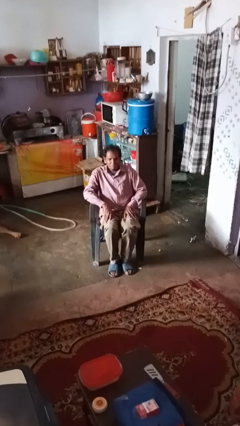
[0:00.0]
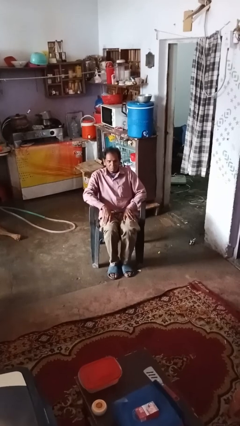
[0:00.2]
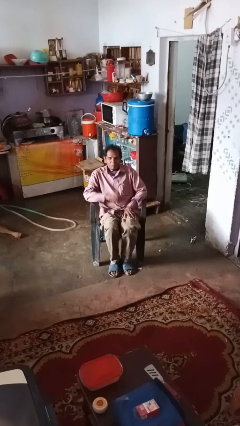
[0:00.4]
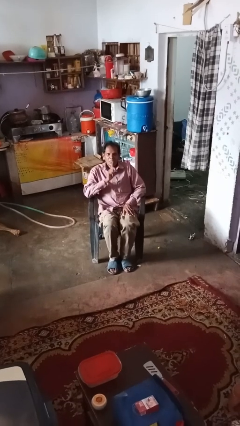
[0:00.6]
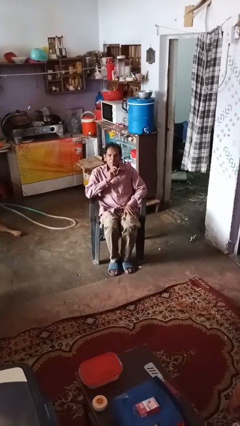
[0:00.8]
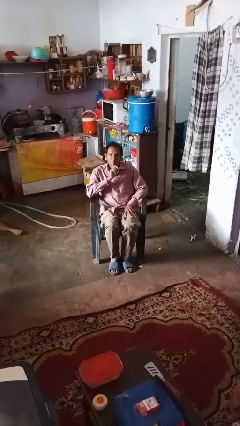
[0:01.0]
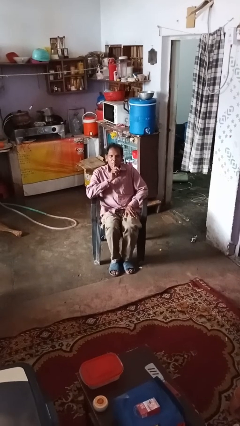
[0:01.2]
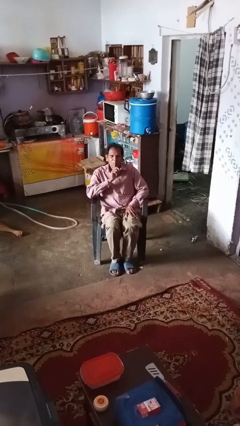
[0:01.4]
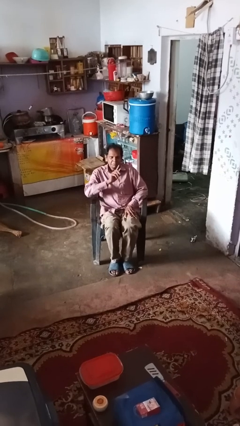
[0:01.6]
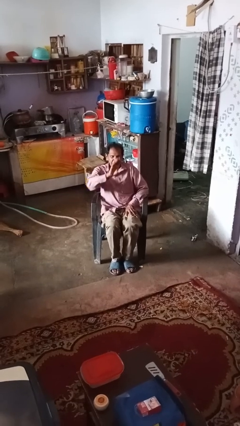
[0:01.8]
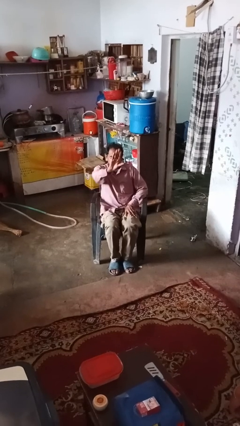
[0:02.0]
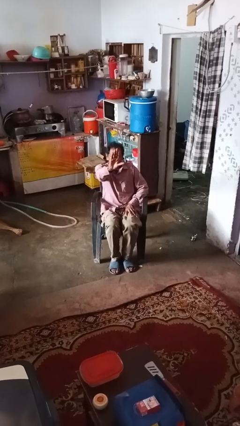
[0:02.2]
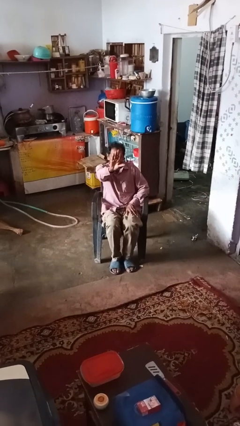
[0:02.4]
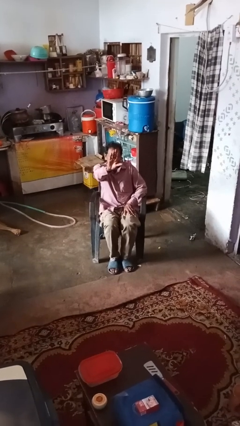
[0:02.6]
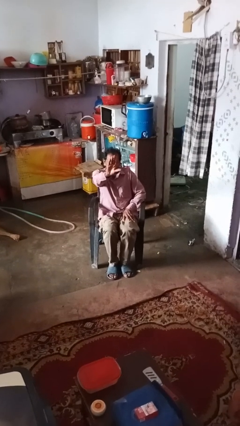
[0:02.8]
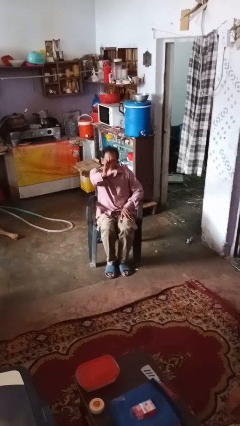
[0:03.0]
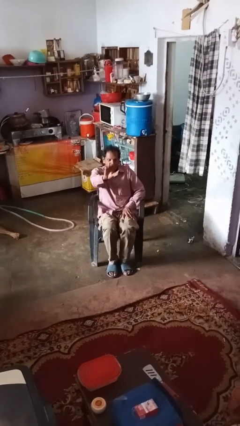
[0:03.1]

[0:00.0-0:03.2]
person gestures be quiet

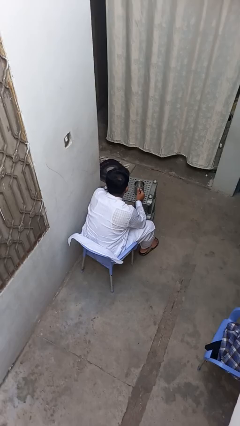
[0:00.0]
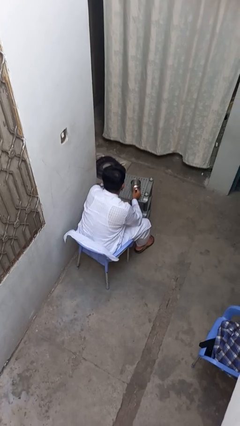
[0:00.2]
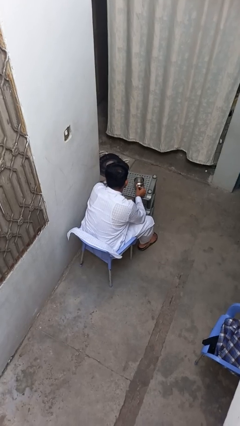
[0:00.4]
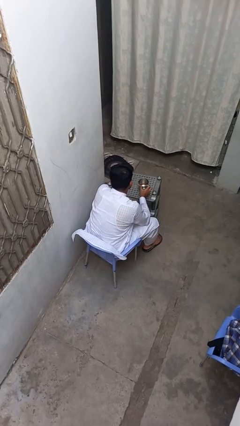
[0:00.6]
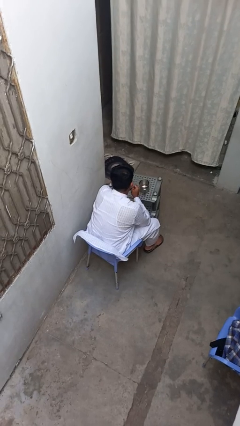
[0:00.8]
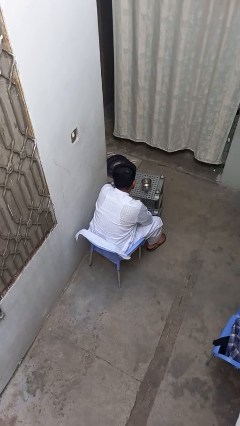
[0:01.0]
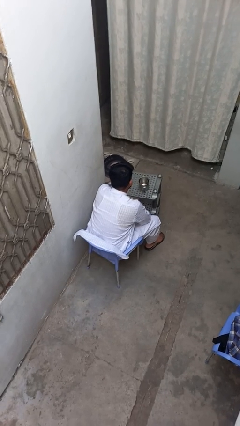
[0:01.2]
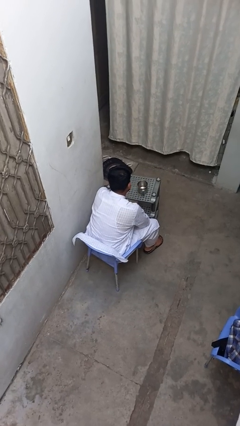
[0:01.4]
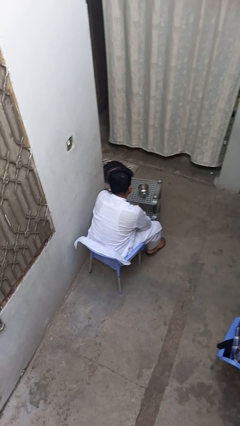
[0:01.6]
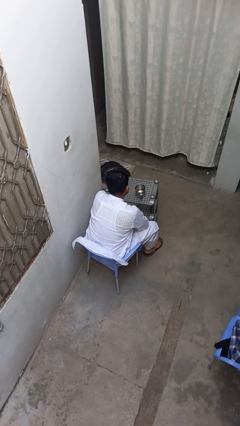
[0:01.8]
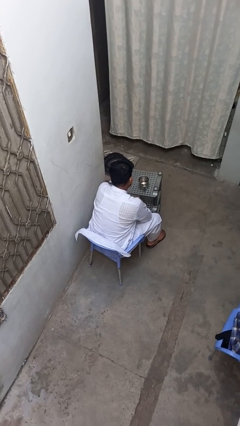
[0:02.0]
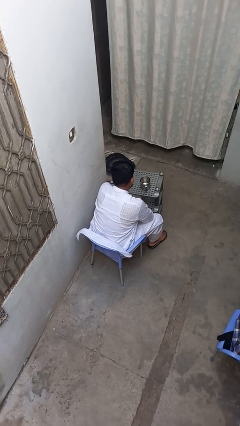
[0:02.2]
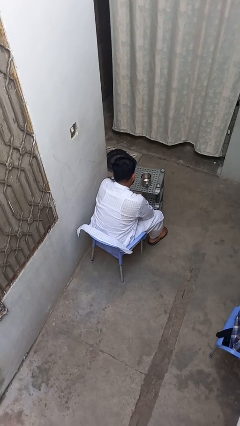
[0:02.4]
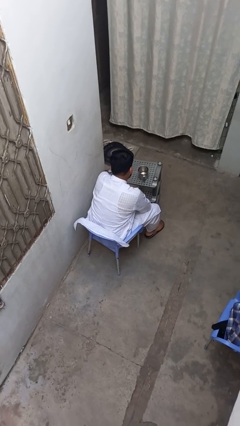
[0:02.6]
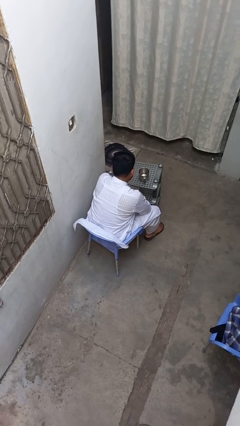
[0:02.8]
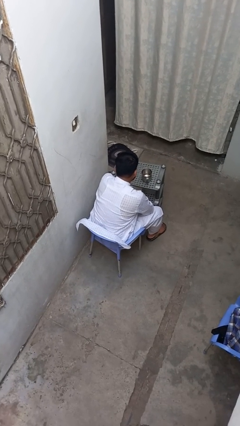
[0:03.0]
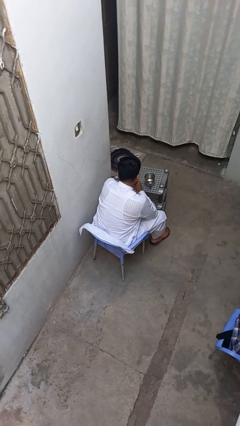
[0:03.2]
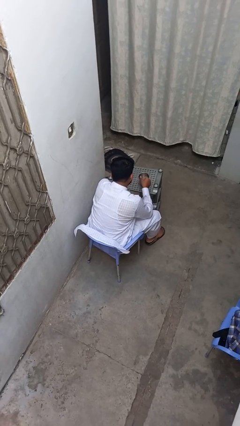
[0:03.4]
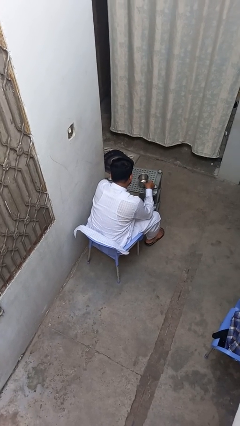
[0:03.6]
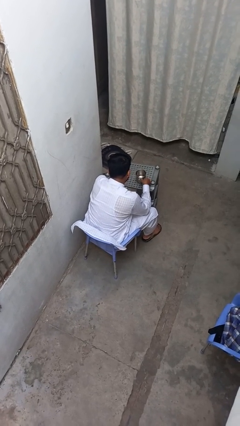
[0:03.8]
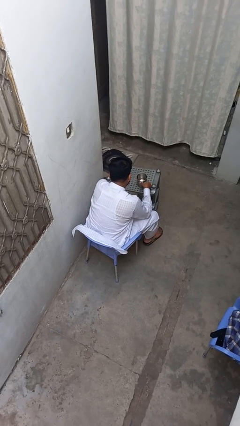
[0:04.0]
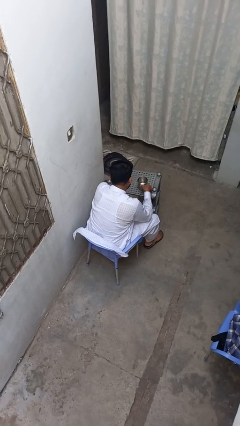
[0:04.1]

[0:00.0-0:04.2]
person puts down object on table

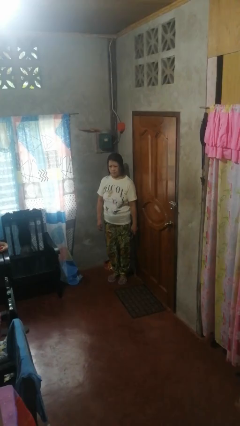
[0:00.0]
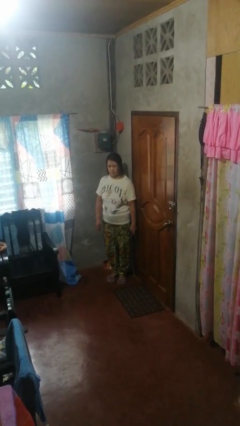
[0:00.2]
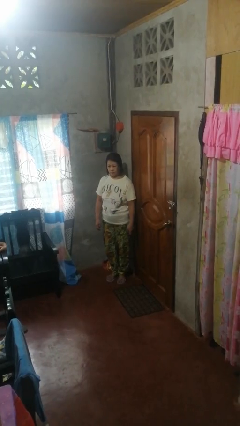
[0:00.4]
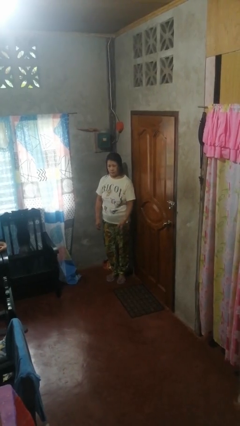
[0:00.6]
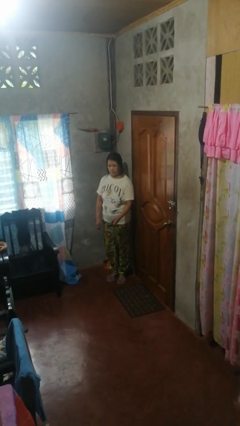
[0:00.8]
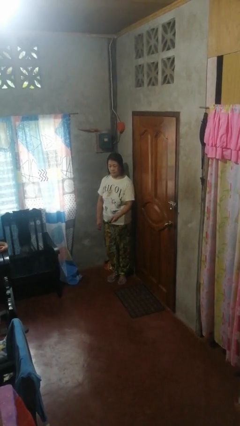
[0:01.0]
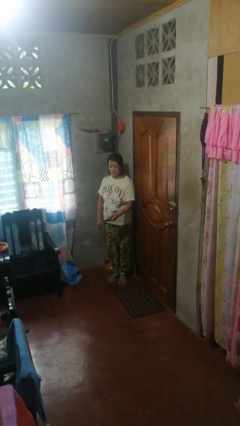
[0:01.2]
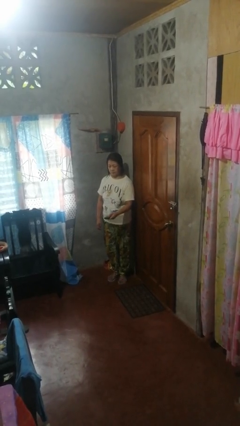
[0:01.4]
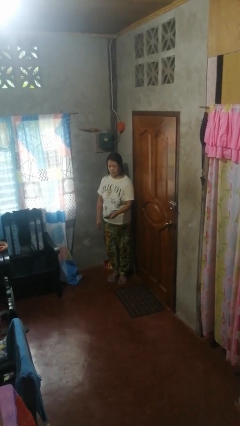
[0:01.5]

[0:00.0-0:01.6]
person uses television remote

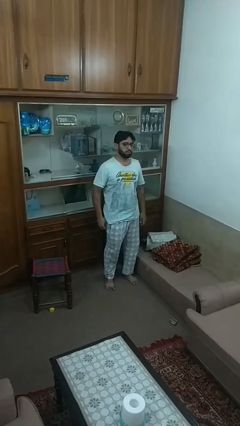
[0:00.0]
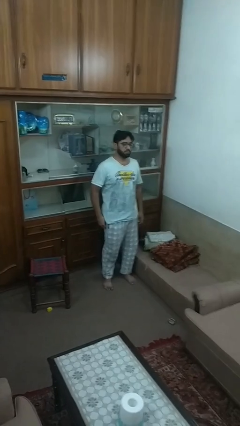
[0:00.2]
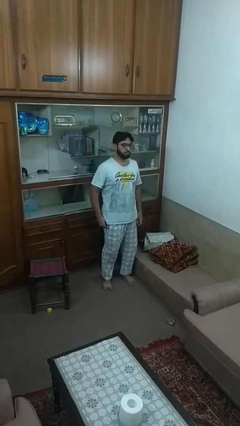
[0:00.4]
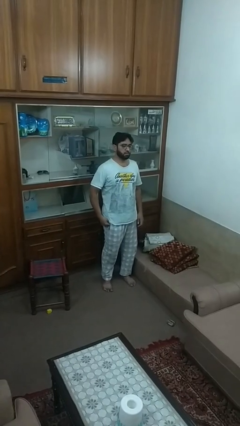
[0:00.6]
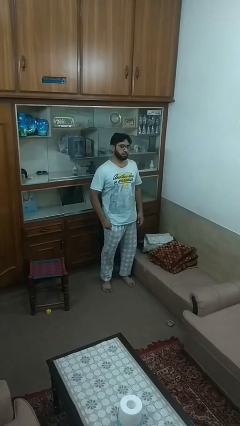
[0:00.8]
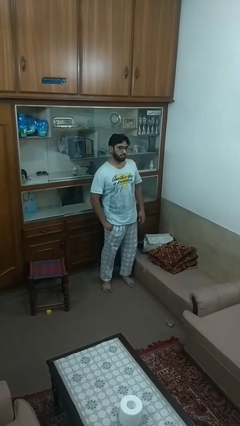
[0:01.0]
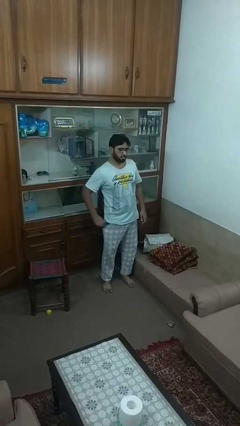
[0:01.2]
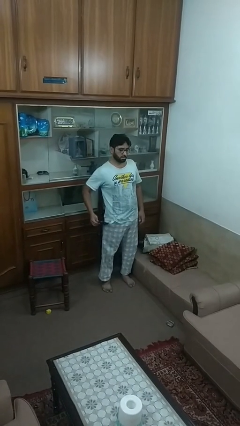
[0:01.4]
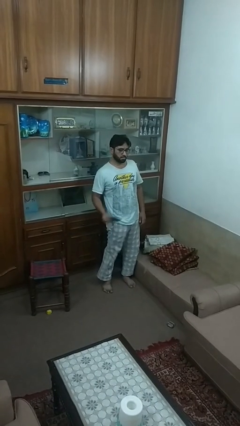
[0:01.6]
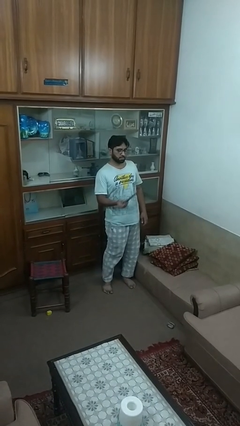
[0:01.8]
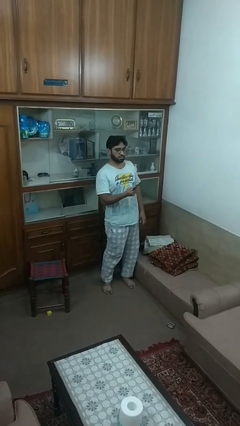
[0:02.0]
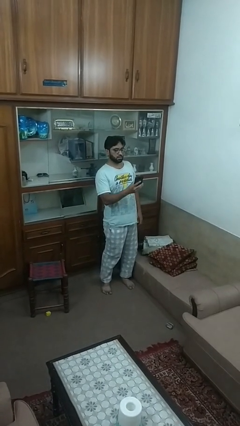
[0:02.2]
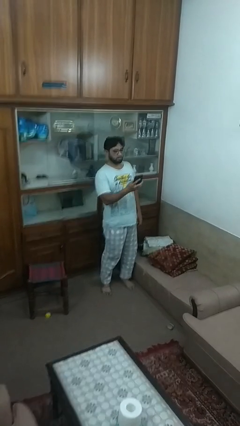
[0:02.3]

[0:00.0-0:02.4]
person takes phone from pocket

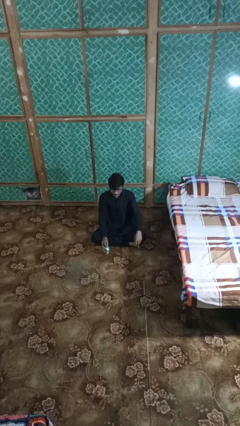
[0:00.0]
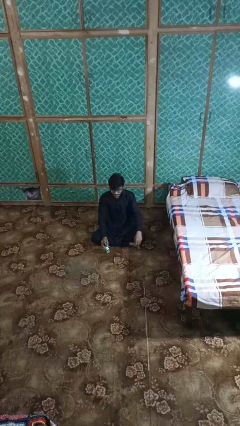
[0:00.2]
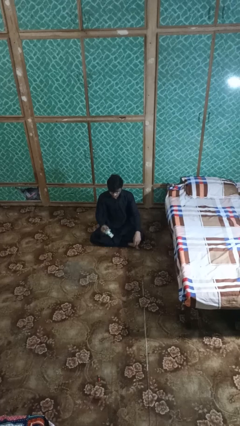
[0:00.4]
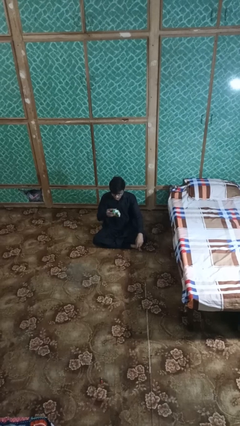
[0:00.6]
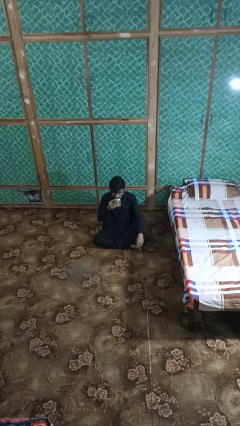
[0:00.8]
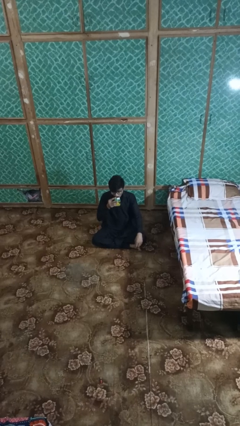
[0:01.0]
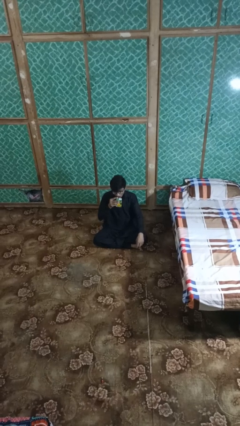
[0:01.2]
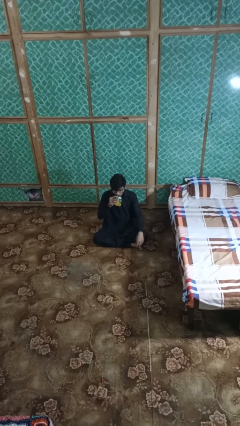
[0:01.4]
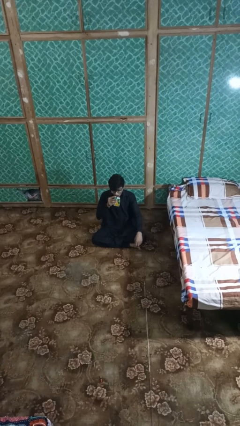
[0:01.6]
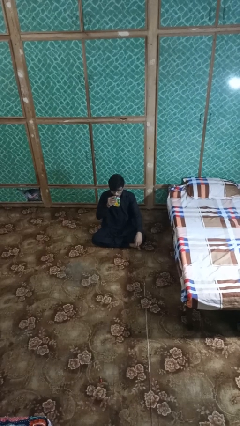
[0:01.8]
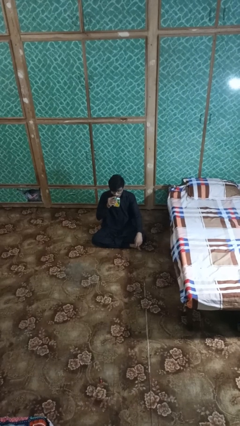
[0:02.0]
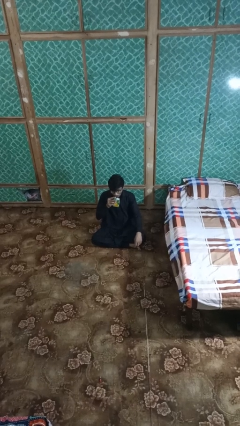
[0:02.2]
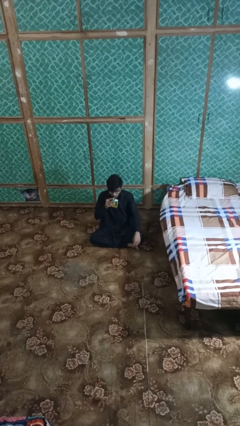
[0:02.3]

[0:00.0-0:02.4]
person drinks from straw

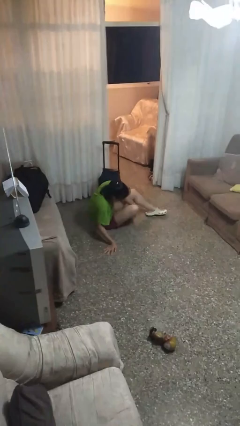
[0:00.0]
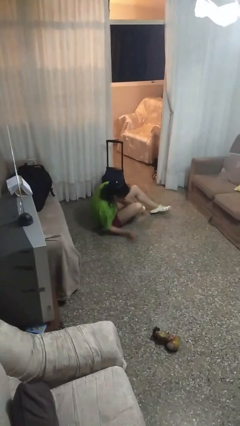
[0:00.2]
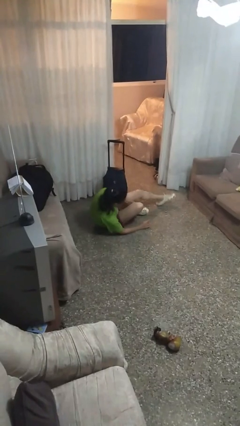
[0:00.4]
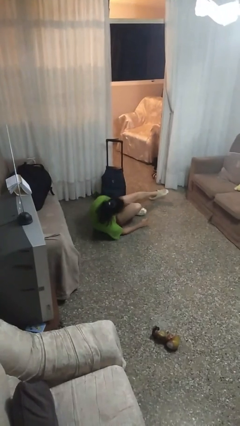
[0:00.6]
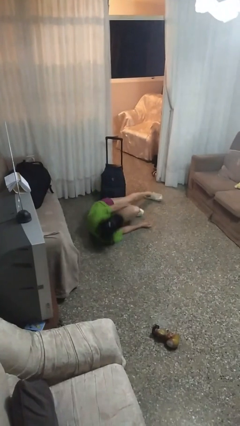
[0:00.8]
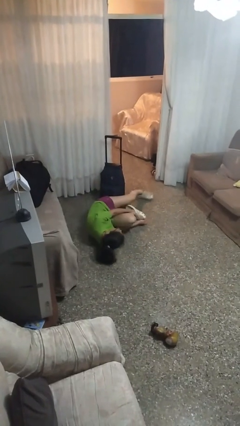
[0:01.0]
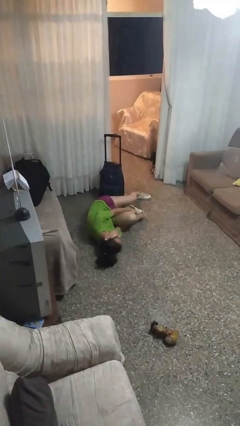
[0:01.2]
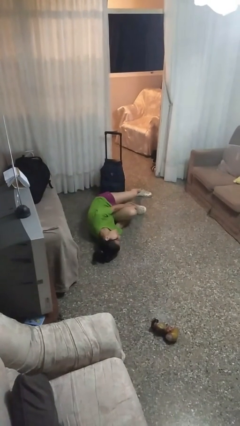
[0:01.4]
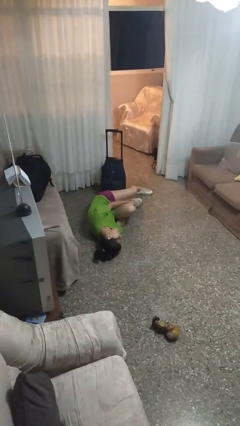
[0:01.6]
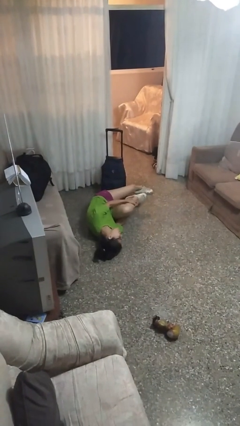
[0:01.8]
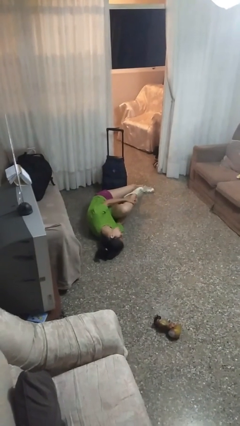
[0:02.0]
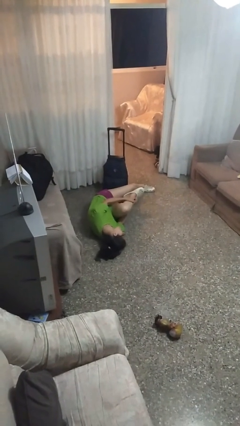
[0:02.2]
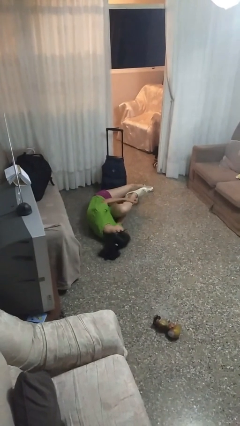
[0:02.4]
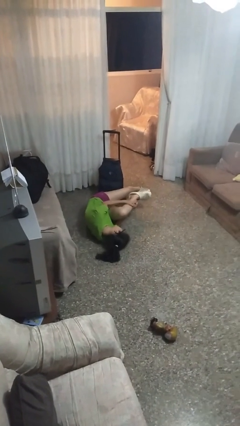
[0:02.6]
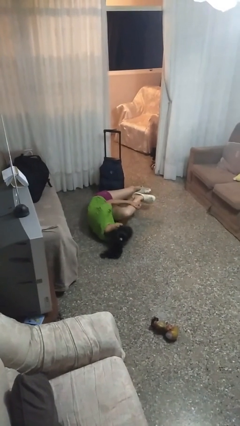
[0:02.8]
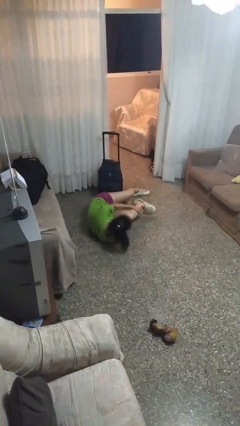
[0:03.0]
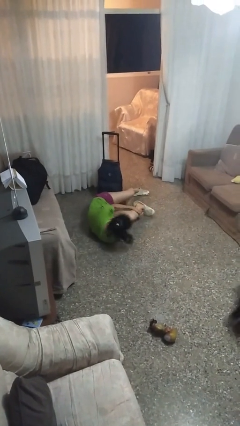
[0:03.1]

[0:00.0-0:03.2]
person lies down on floor

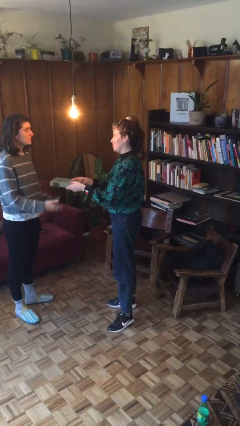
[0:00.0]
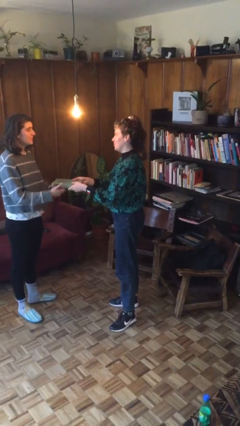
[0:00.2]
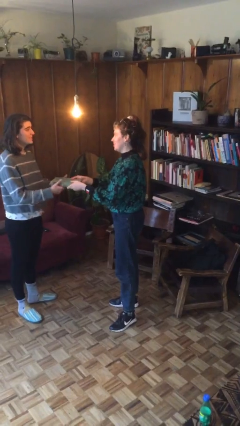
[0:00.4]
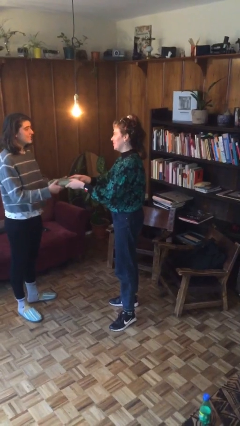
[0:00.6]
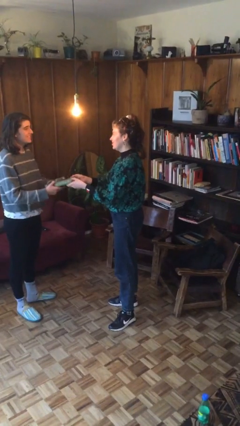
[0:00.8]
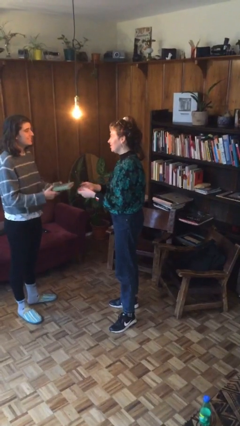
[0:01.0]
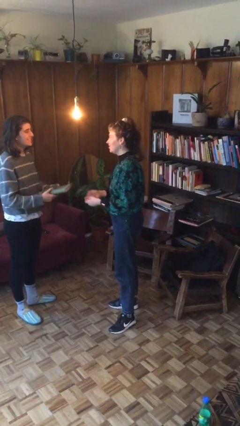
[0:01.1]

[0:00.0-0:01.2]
person transfers object to person
